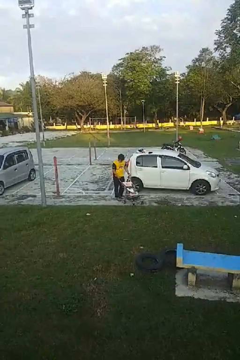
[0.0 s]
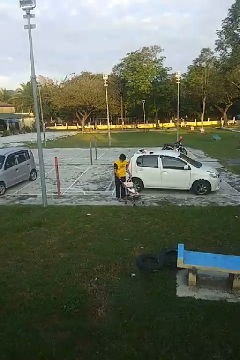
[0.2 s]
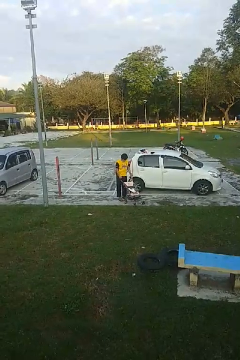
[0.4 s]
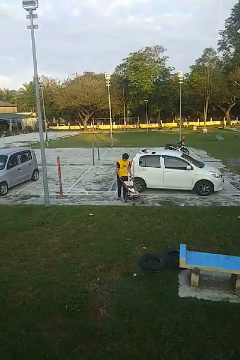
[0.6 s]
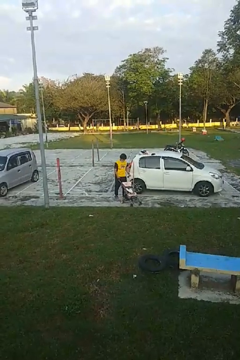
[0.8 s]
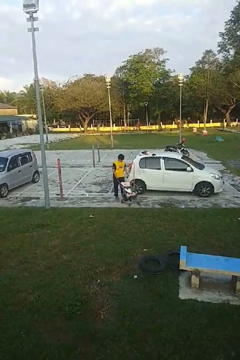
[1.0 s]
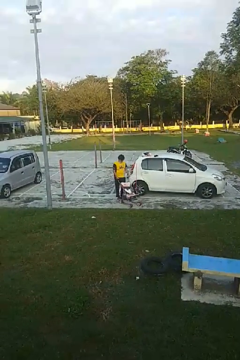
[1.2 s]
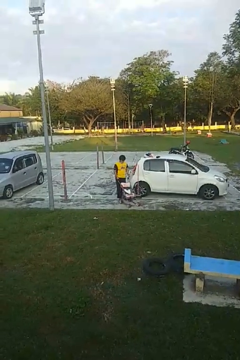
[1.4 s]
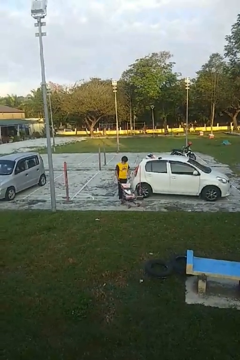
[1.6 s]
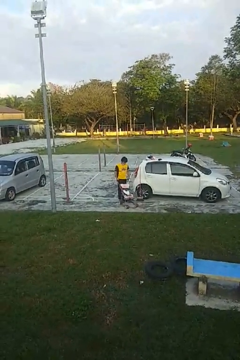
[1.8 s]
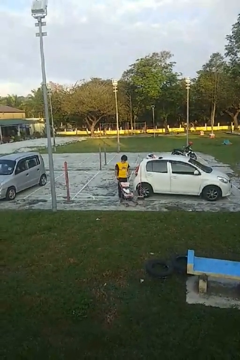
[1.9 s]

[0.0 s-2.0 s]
person pulls wheeled cart

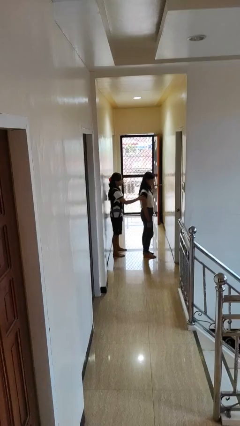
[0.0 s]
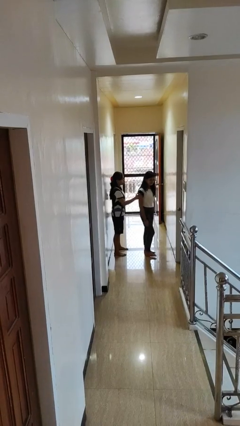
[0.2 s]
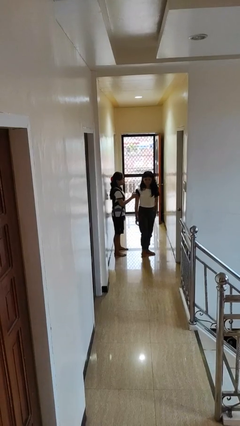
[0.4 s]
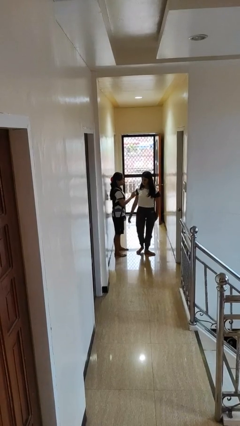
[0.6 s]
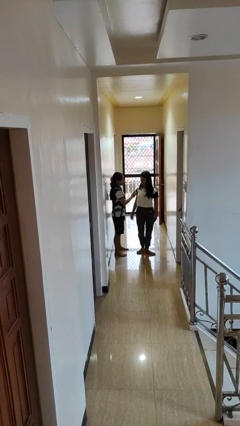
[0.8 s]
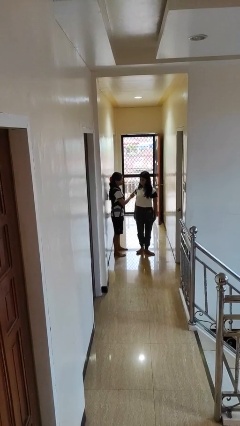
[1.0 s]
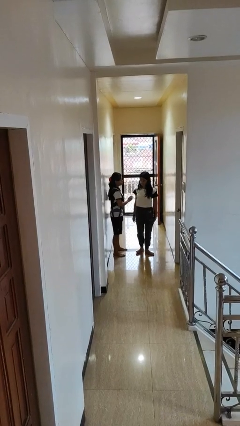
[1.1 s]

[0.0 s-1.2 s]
person spins person around

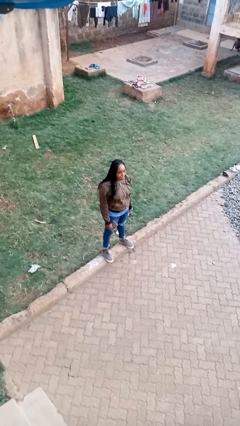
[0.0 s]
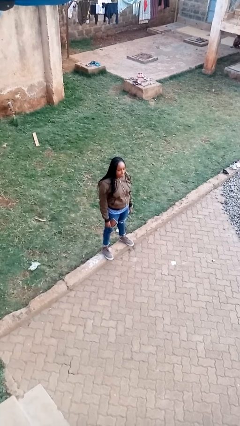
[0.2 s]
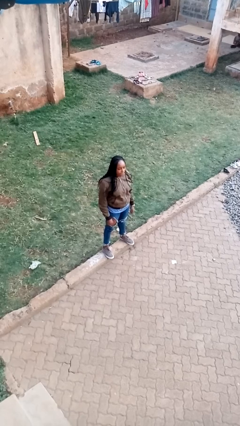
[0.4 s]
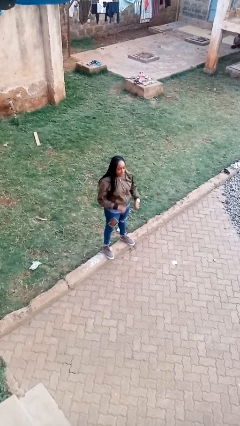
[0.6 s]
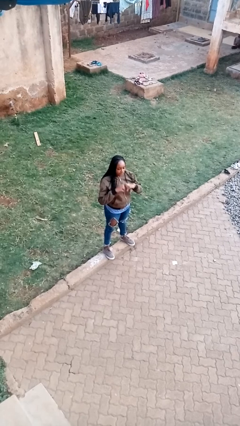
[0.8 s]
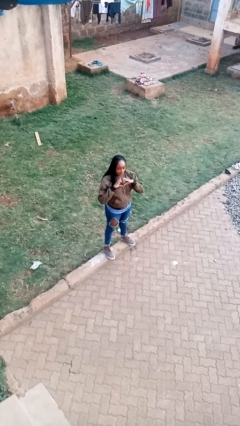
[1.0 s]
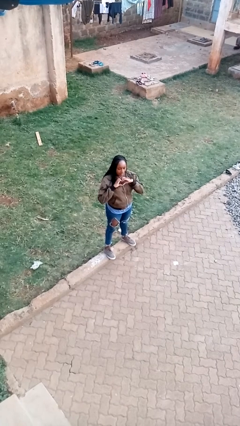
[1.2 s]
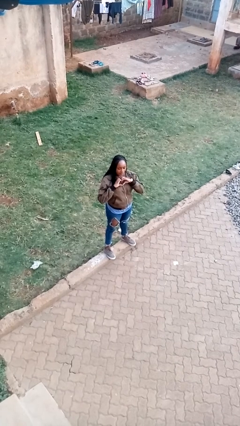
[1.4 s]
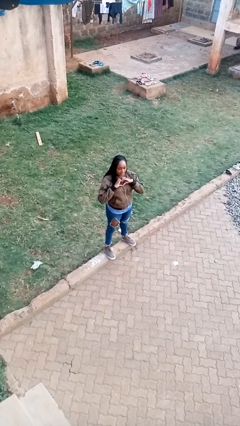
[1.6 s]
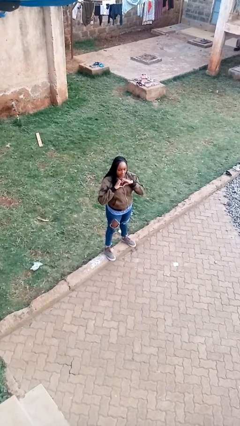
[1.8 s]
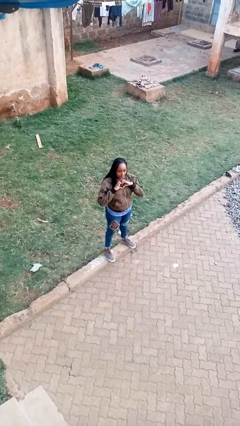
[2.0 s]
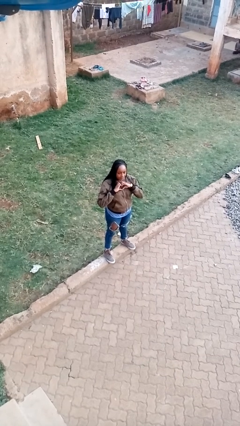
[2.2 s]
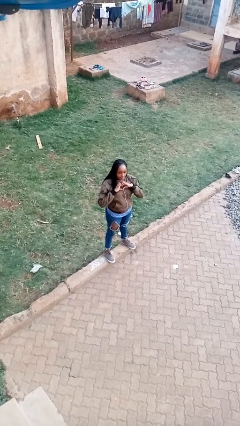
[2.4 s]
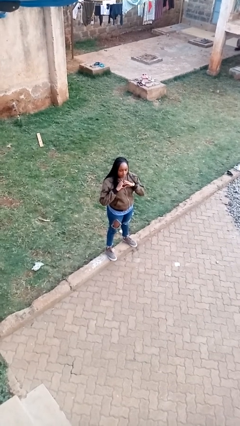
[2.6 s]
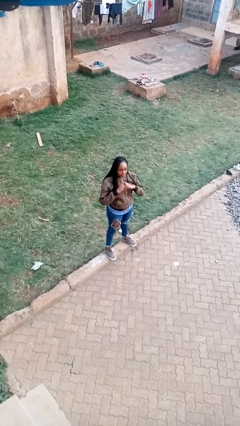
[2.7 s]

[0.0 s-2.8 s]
person gestures heart

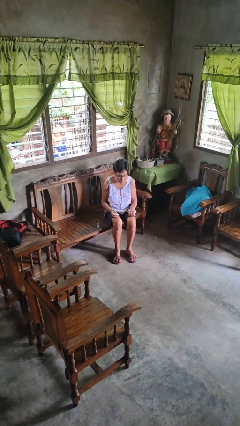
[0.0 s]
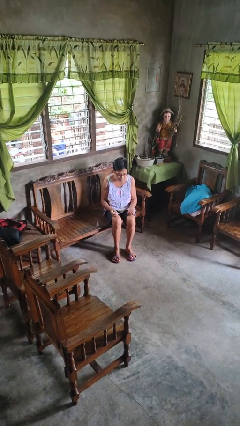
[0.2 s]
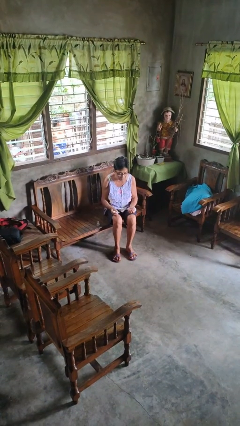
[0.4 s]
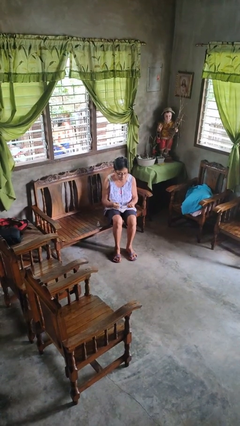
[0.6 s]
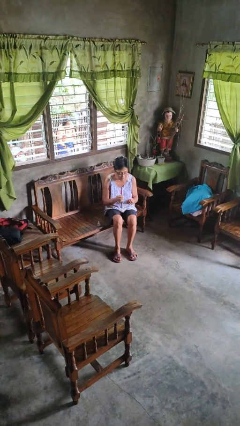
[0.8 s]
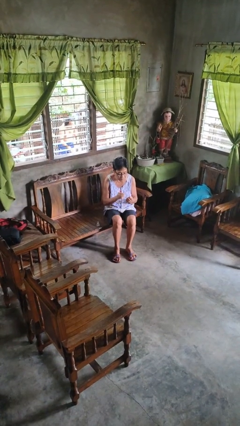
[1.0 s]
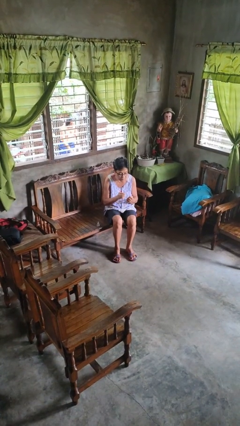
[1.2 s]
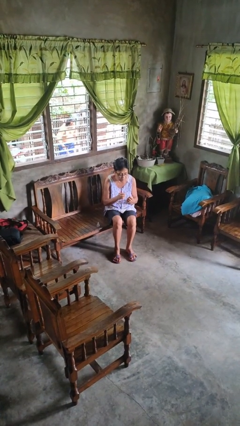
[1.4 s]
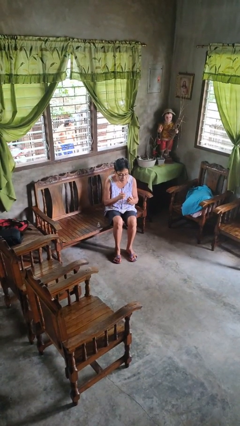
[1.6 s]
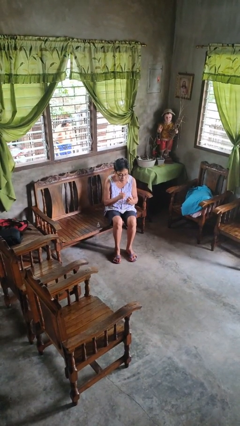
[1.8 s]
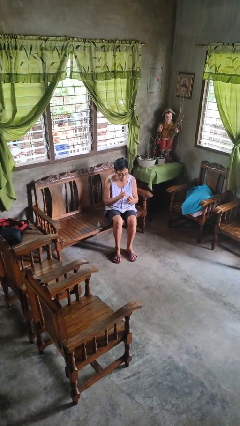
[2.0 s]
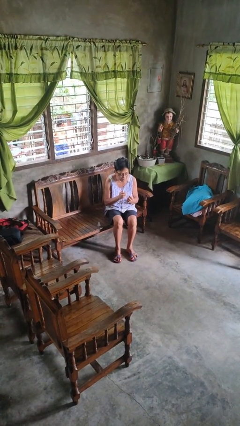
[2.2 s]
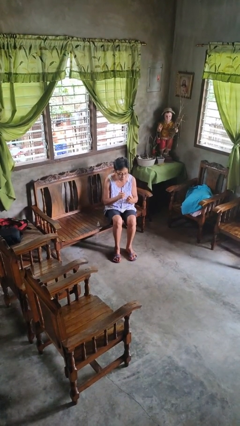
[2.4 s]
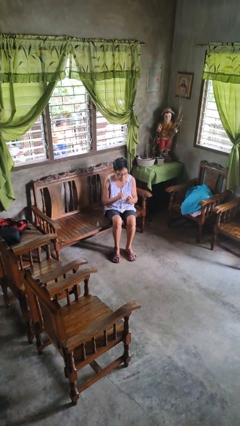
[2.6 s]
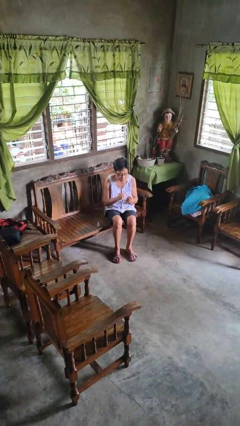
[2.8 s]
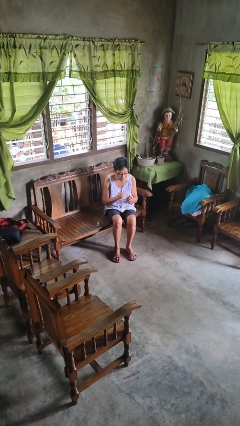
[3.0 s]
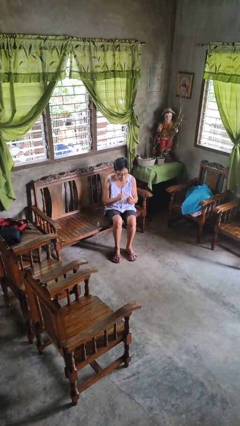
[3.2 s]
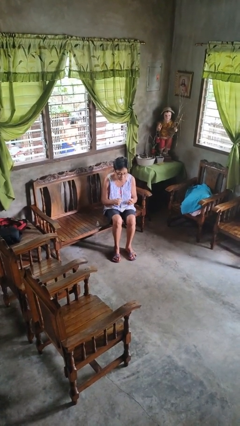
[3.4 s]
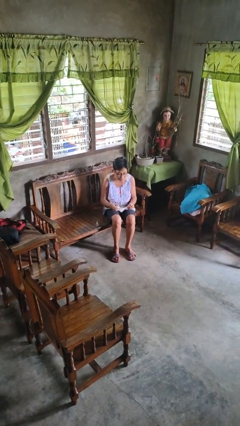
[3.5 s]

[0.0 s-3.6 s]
person paints fingernails

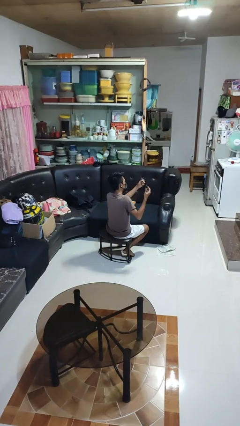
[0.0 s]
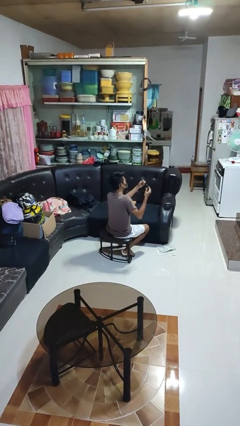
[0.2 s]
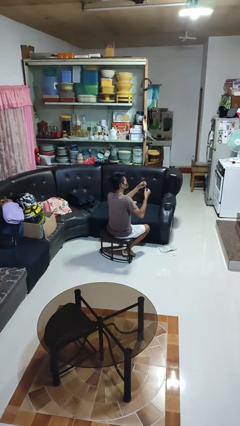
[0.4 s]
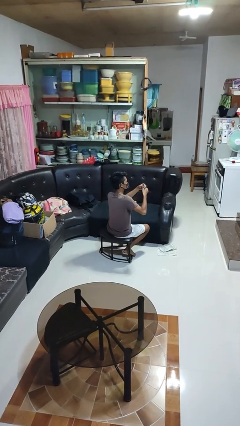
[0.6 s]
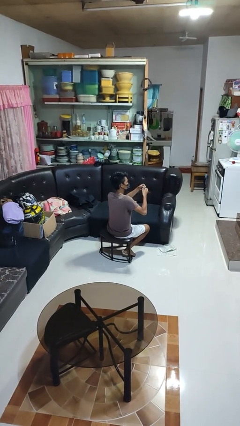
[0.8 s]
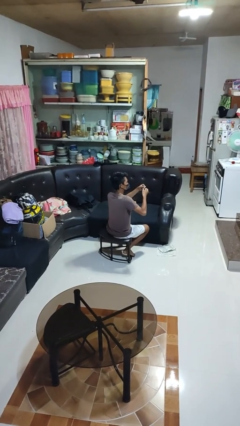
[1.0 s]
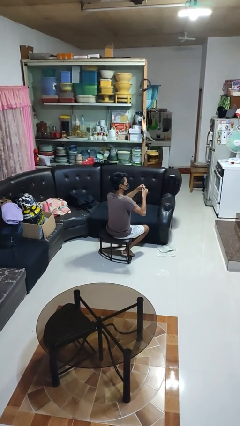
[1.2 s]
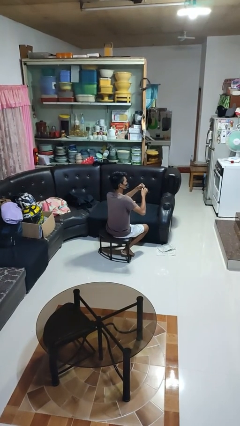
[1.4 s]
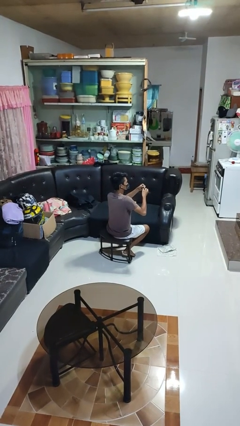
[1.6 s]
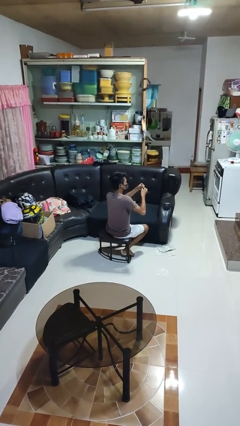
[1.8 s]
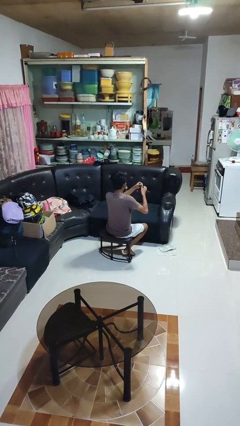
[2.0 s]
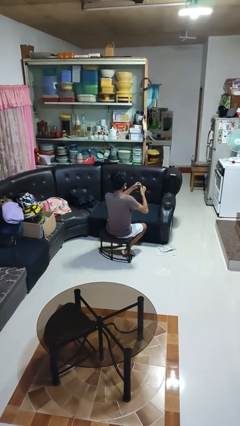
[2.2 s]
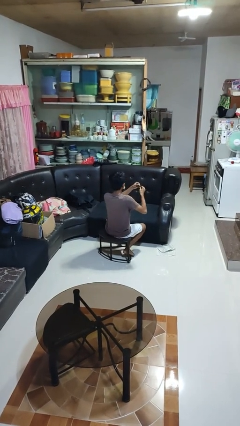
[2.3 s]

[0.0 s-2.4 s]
person clips fingernails

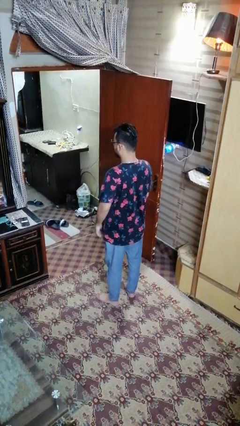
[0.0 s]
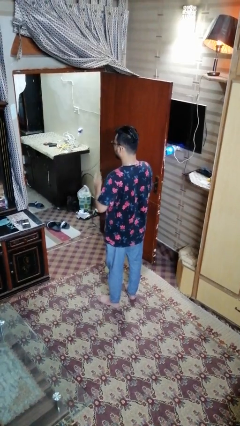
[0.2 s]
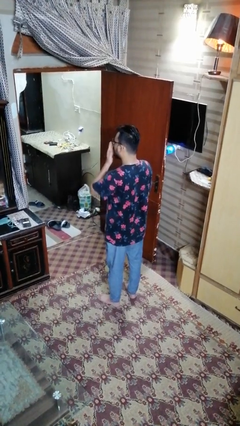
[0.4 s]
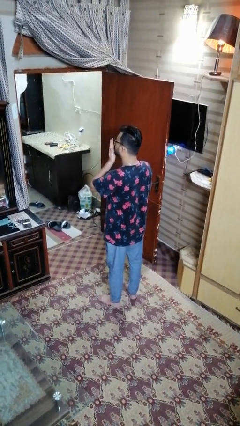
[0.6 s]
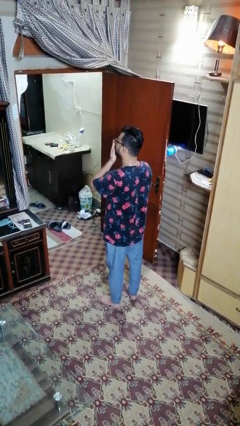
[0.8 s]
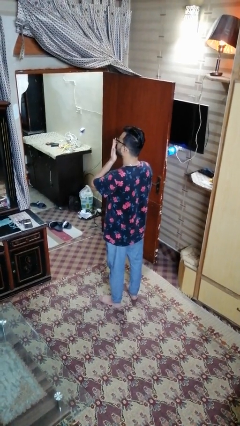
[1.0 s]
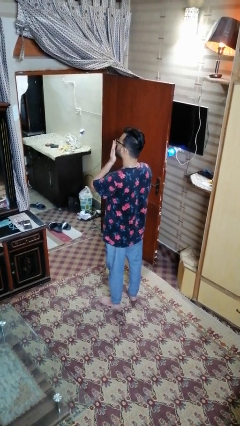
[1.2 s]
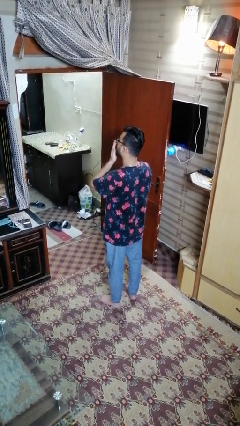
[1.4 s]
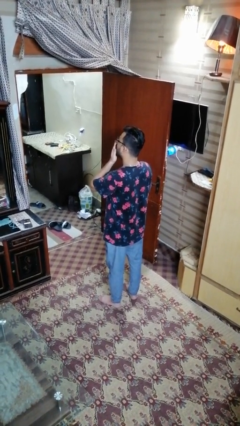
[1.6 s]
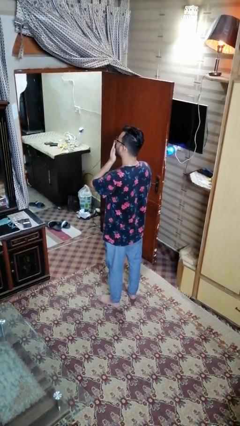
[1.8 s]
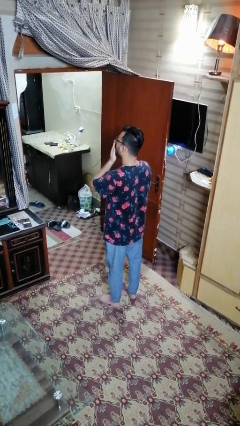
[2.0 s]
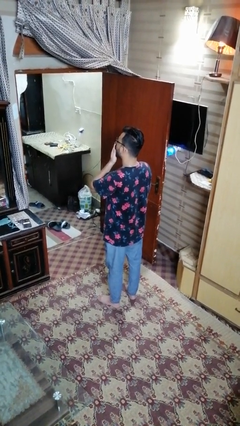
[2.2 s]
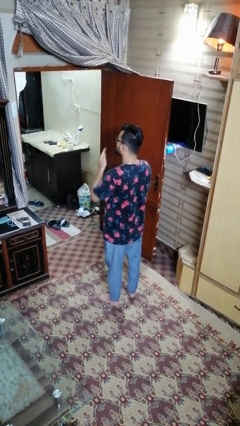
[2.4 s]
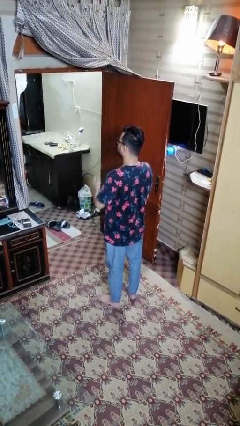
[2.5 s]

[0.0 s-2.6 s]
person yawns

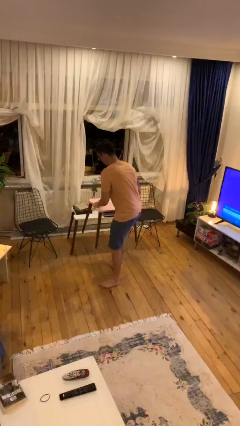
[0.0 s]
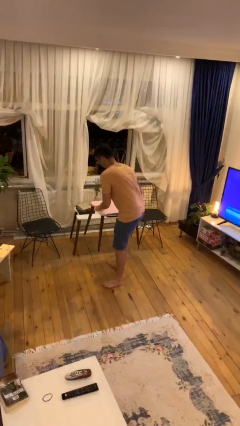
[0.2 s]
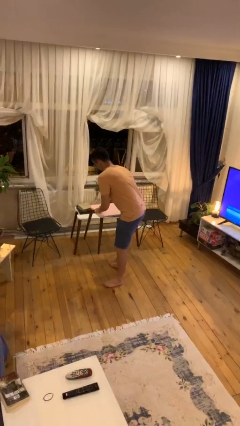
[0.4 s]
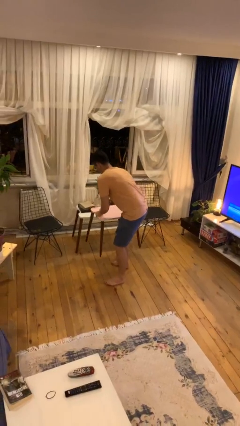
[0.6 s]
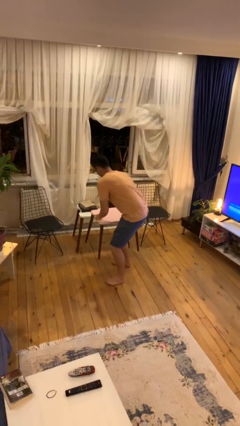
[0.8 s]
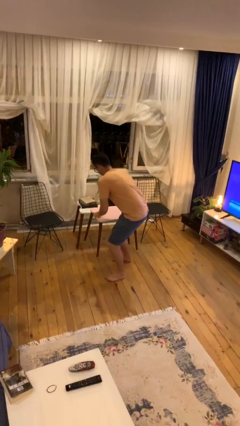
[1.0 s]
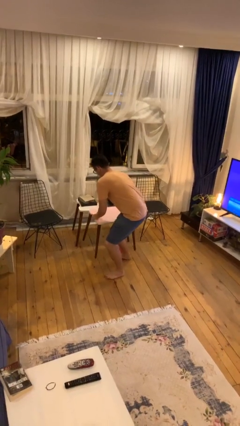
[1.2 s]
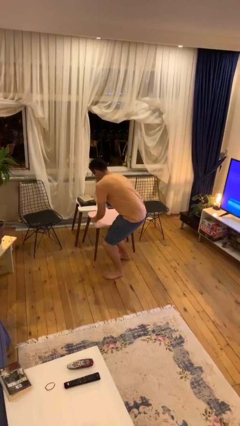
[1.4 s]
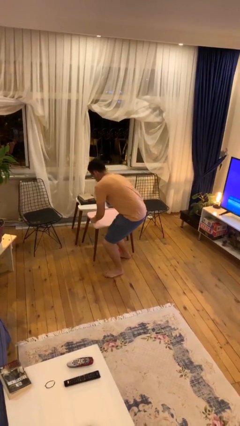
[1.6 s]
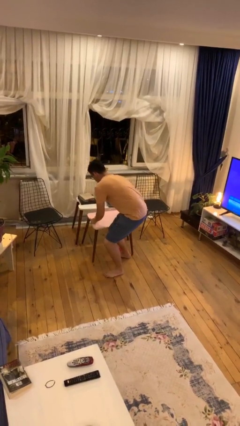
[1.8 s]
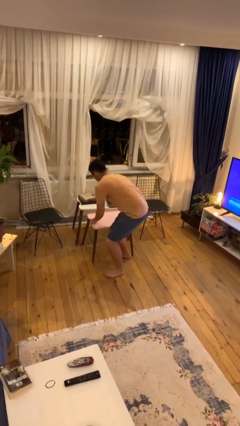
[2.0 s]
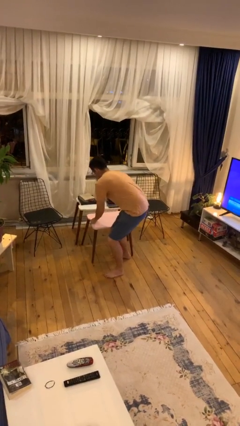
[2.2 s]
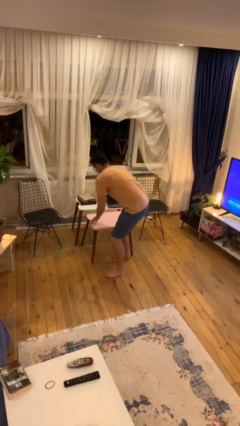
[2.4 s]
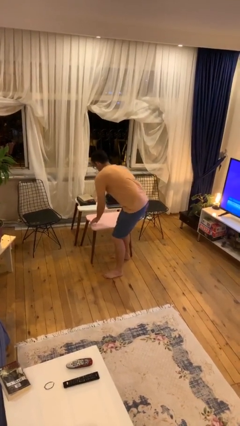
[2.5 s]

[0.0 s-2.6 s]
person puts down object on floor
